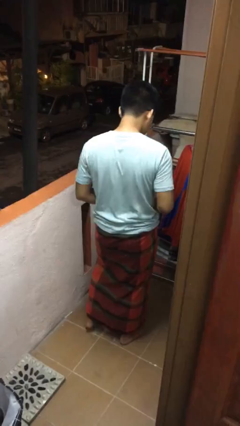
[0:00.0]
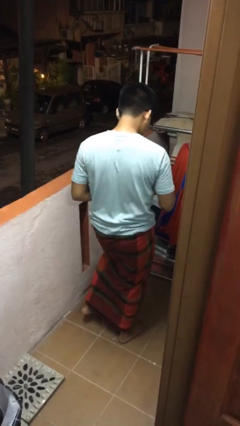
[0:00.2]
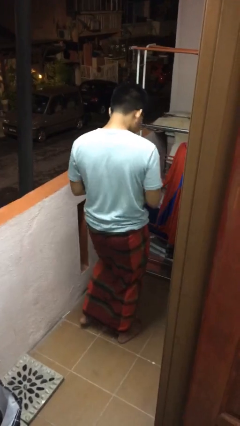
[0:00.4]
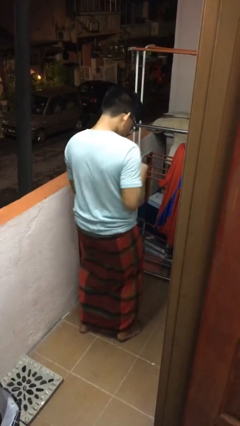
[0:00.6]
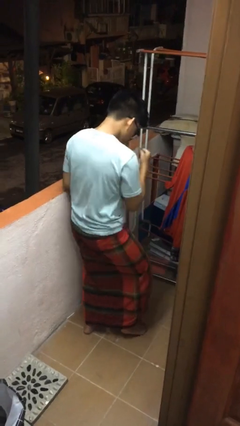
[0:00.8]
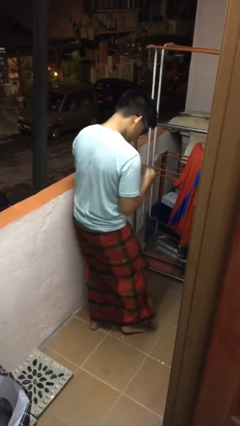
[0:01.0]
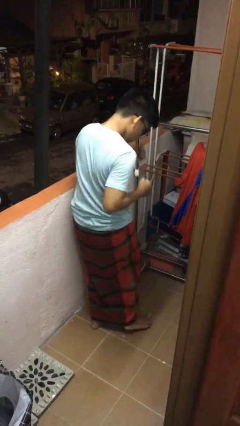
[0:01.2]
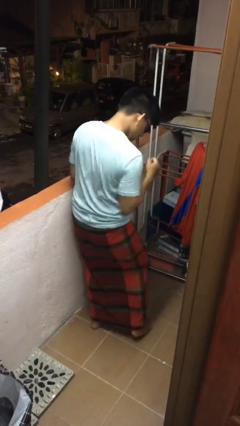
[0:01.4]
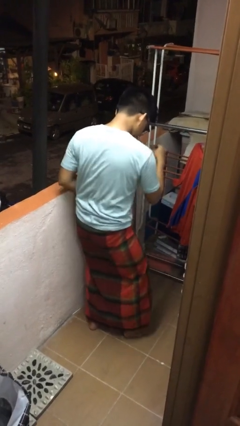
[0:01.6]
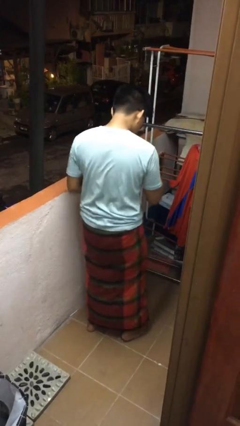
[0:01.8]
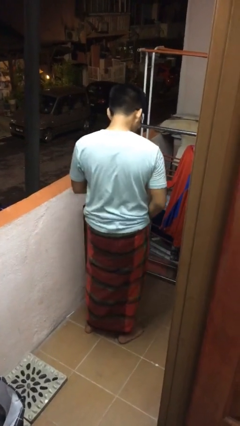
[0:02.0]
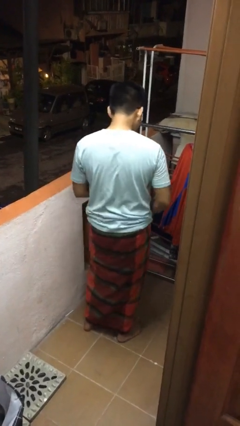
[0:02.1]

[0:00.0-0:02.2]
person dances in place

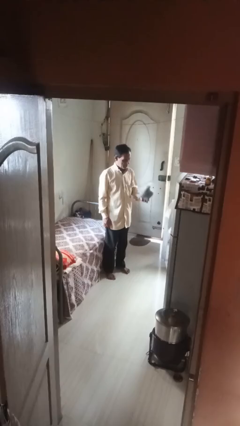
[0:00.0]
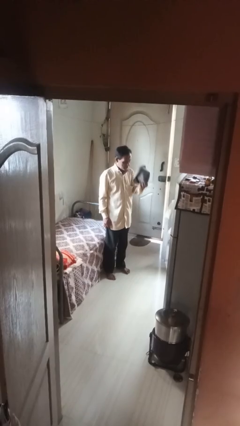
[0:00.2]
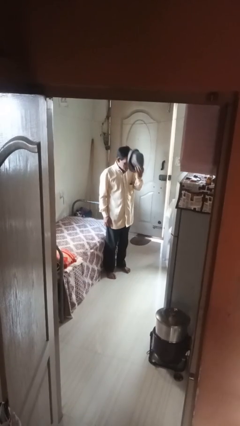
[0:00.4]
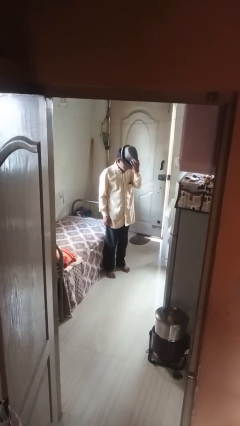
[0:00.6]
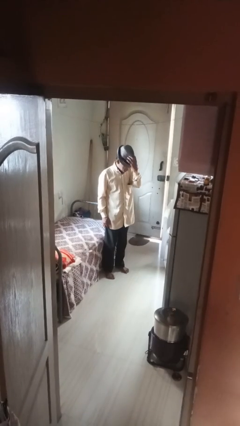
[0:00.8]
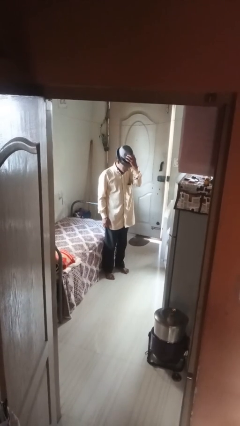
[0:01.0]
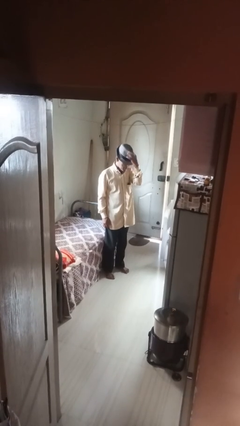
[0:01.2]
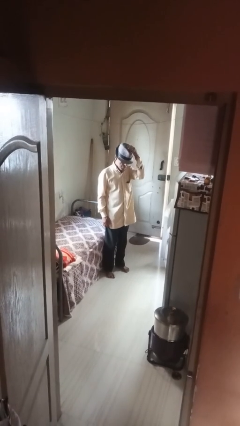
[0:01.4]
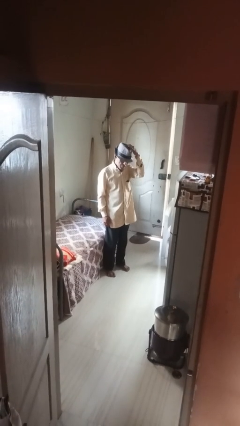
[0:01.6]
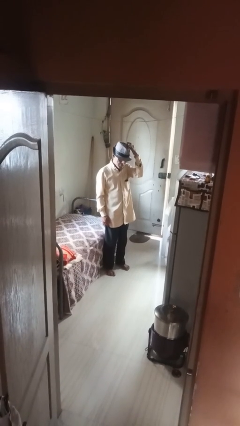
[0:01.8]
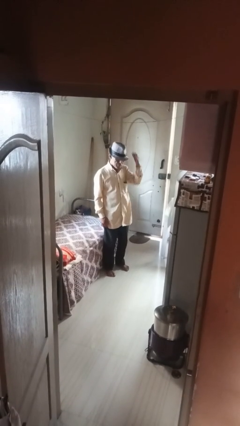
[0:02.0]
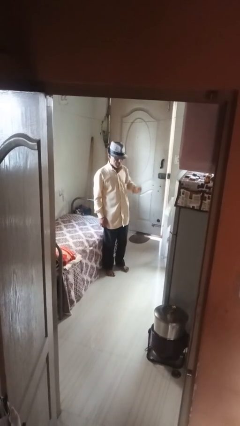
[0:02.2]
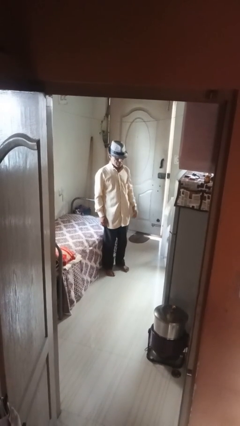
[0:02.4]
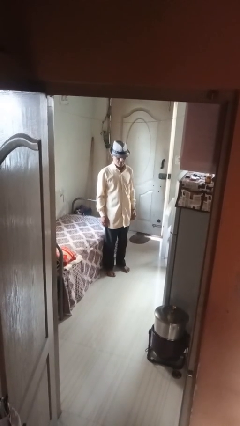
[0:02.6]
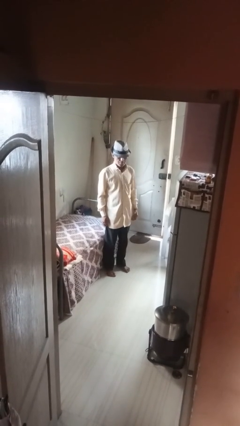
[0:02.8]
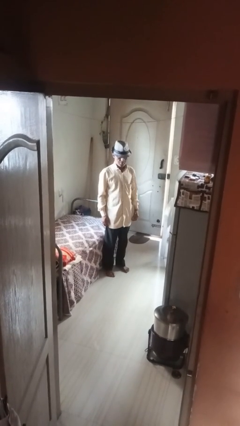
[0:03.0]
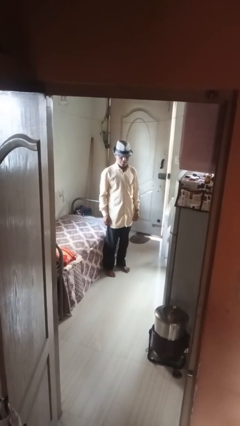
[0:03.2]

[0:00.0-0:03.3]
person puts on hat

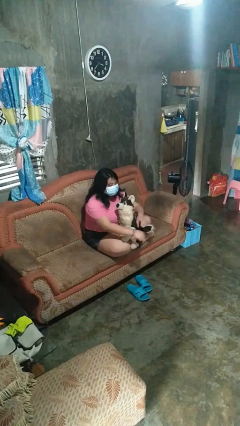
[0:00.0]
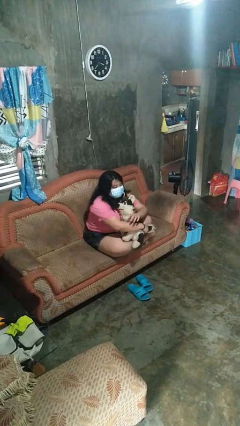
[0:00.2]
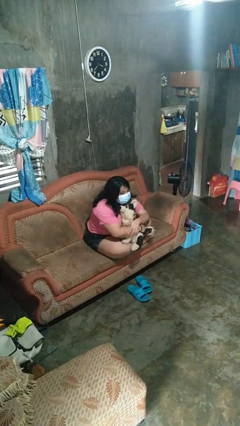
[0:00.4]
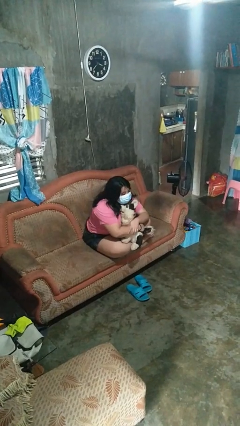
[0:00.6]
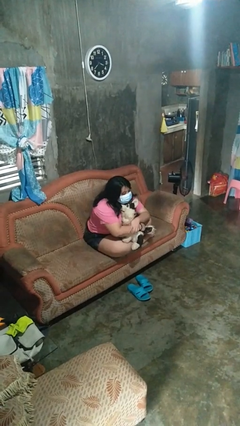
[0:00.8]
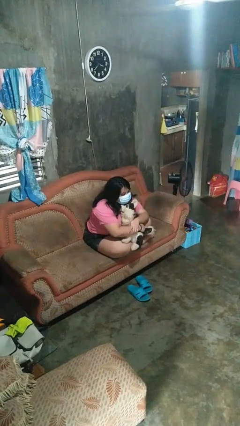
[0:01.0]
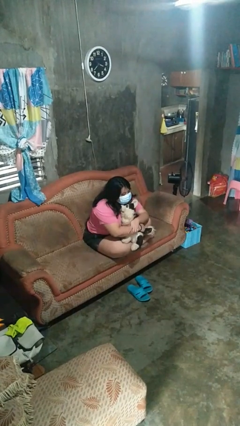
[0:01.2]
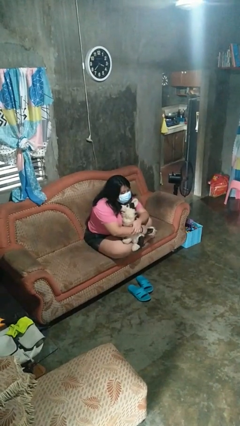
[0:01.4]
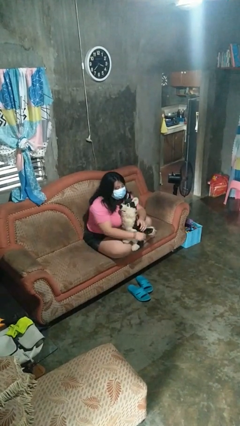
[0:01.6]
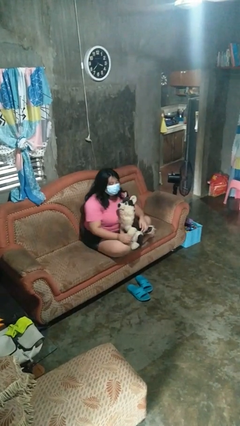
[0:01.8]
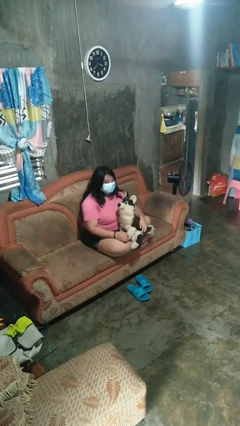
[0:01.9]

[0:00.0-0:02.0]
person hugs stuffed animal

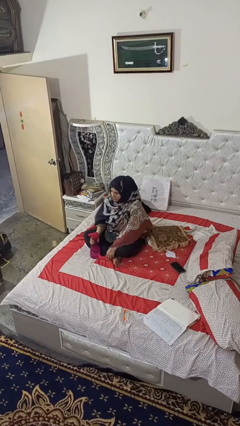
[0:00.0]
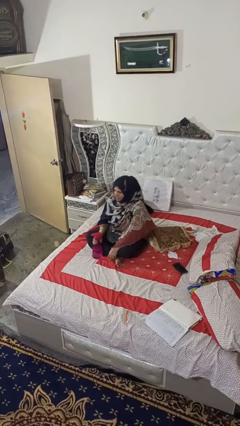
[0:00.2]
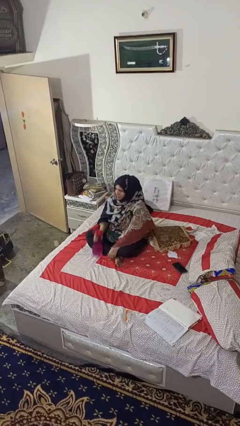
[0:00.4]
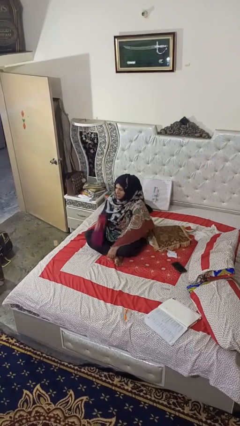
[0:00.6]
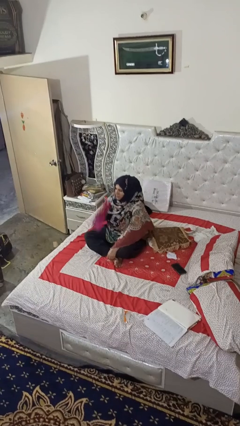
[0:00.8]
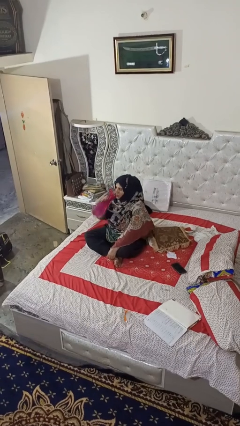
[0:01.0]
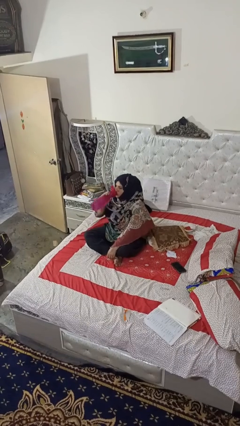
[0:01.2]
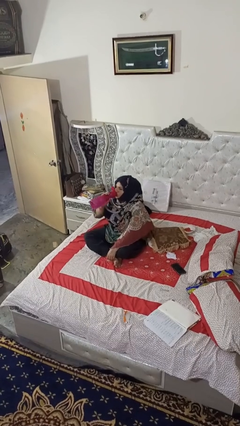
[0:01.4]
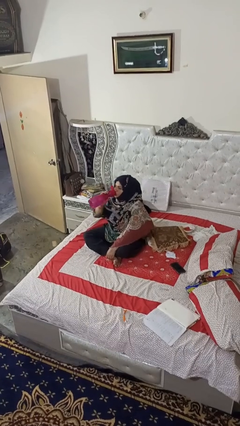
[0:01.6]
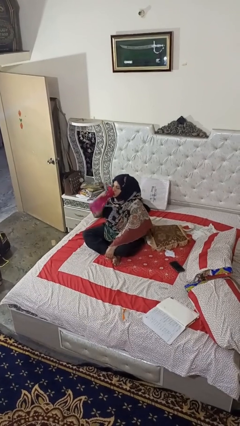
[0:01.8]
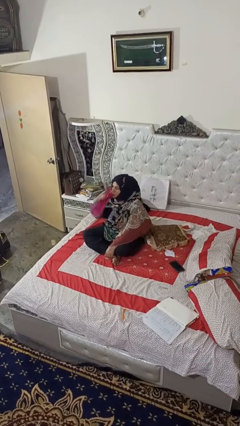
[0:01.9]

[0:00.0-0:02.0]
person drinks from bottle

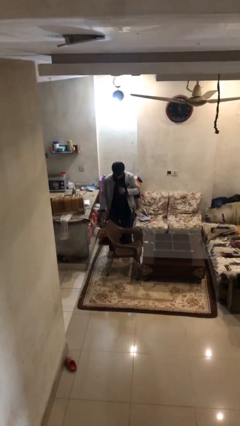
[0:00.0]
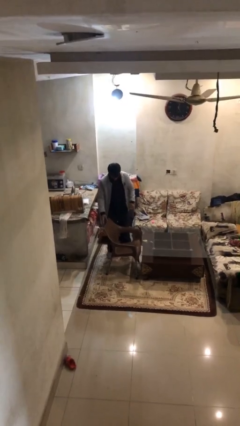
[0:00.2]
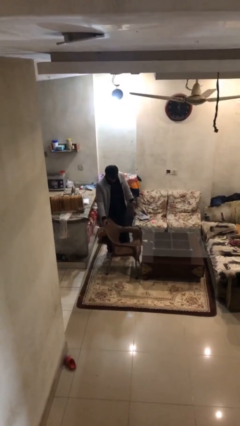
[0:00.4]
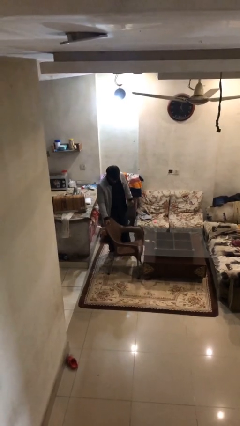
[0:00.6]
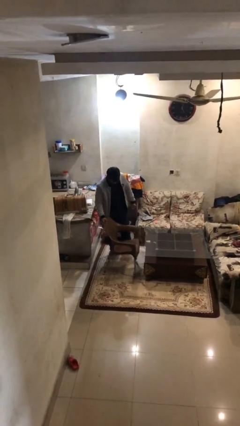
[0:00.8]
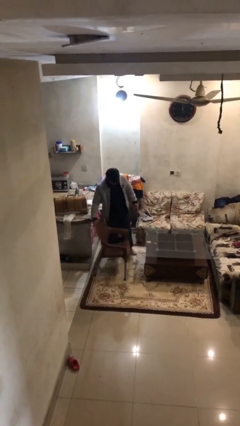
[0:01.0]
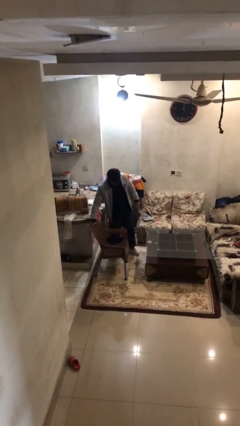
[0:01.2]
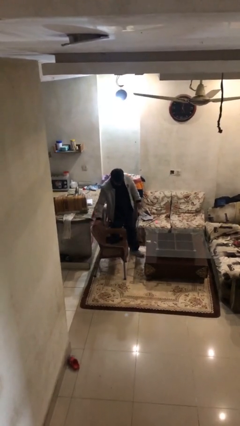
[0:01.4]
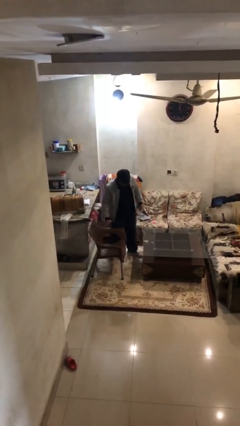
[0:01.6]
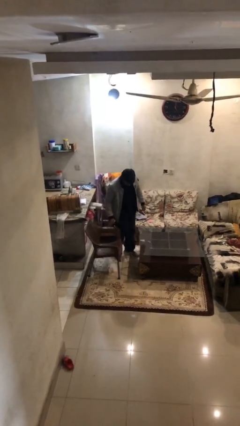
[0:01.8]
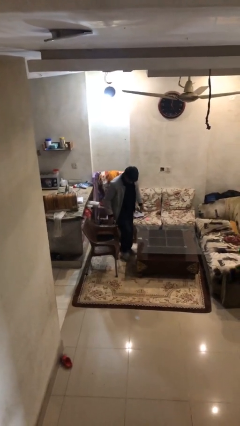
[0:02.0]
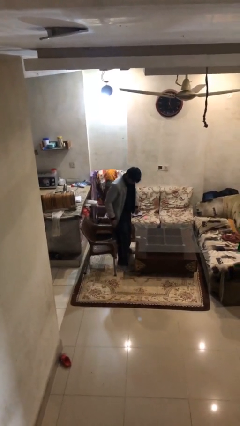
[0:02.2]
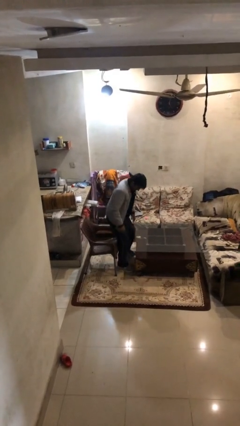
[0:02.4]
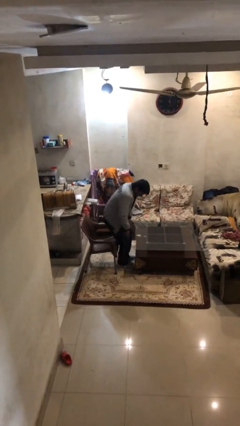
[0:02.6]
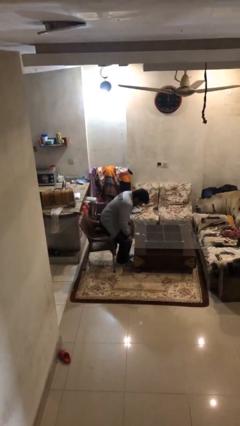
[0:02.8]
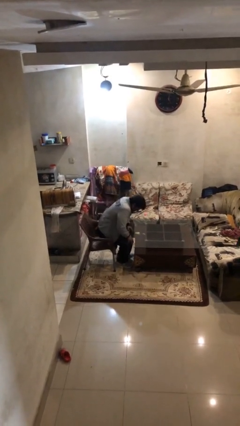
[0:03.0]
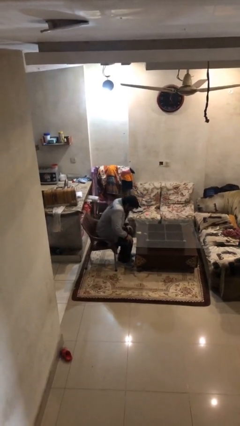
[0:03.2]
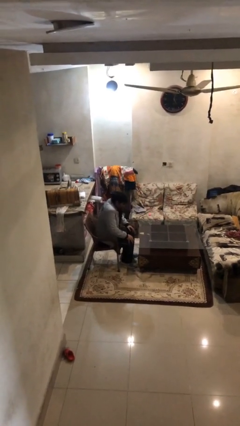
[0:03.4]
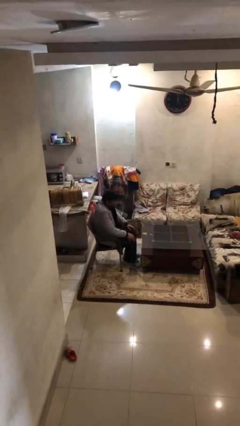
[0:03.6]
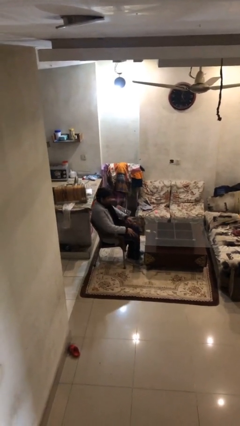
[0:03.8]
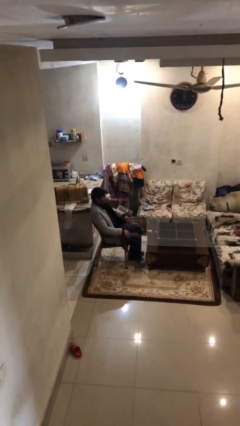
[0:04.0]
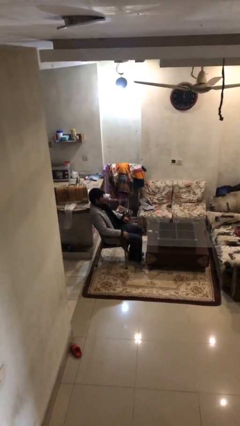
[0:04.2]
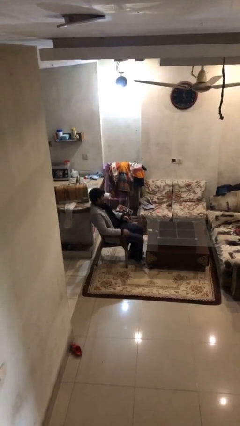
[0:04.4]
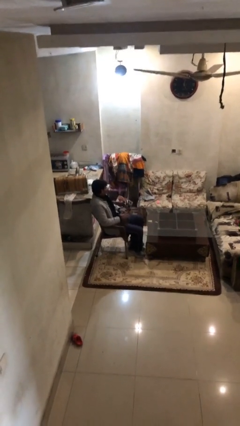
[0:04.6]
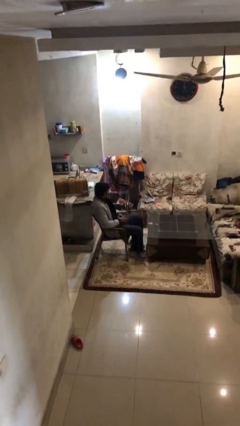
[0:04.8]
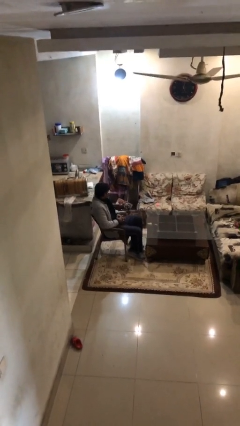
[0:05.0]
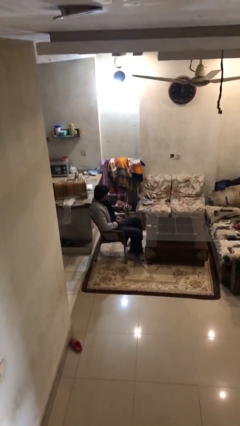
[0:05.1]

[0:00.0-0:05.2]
person sits down

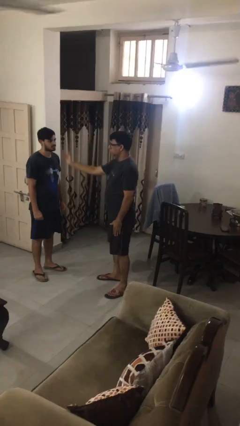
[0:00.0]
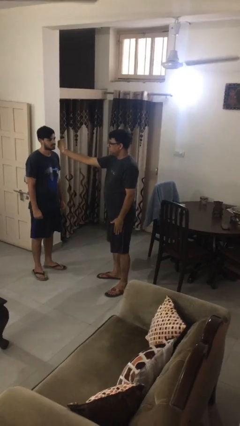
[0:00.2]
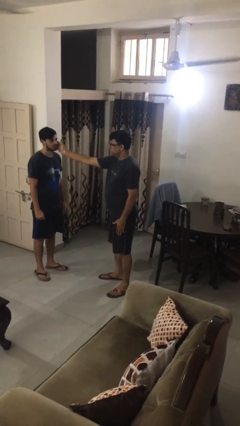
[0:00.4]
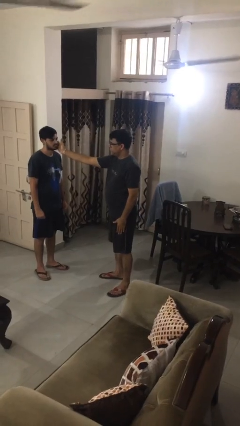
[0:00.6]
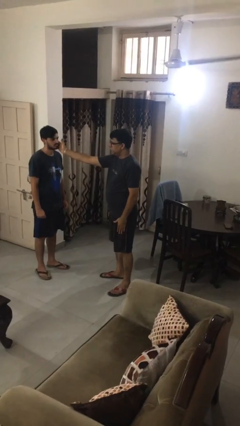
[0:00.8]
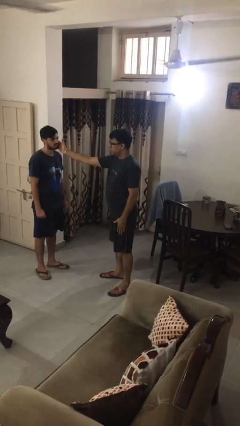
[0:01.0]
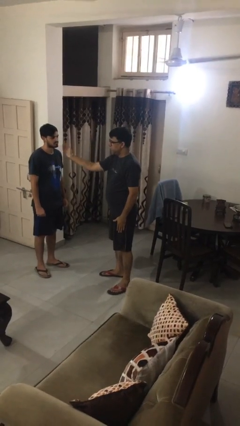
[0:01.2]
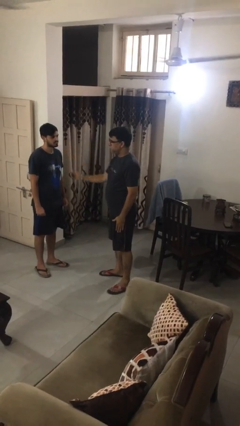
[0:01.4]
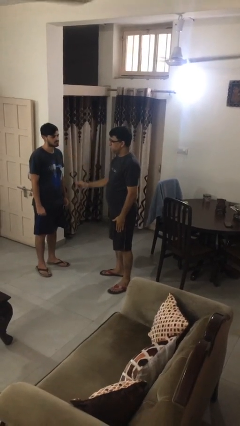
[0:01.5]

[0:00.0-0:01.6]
person touches face of person

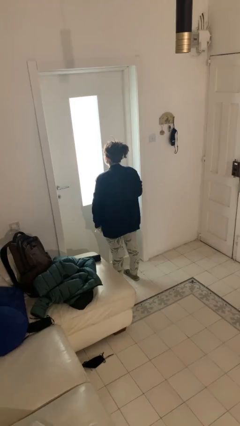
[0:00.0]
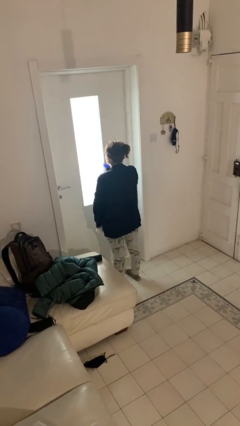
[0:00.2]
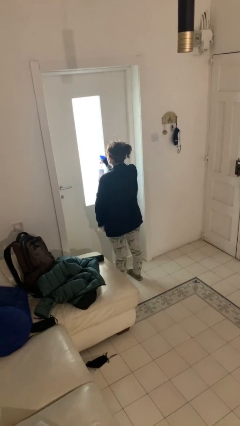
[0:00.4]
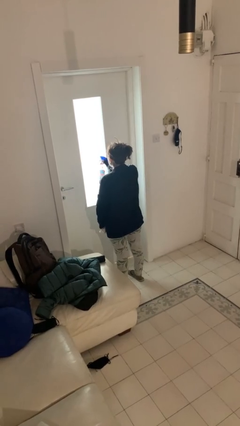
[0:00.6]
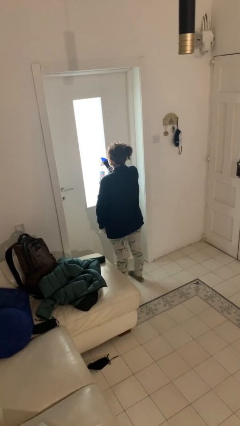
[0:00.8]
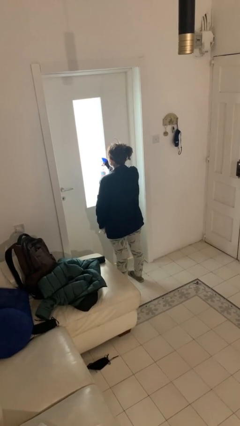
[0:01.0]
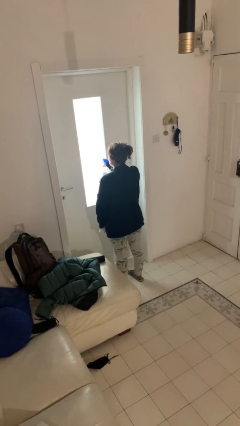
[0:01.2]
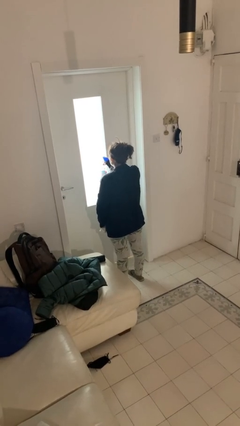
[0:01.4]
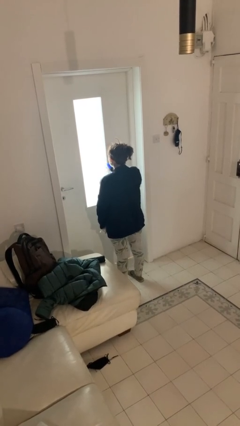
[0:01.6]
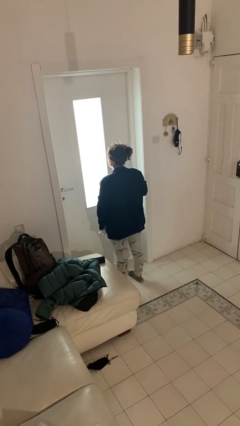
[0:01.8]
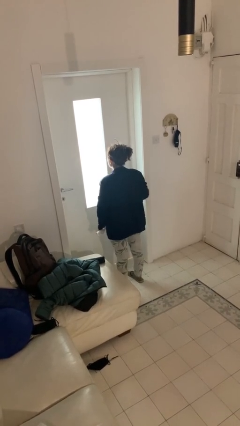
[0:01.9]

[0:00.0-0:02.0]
person sprays from bottle
